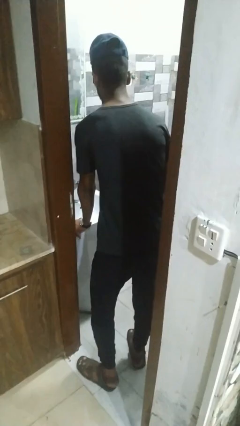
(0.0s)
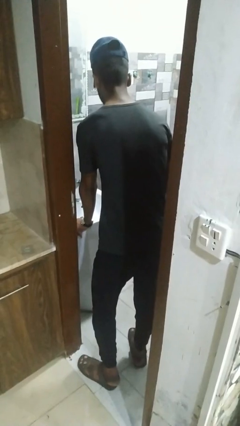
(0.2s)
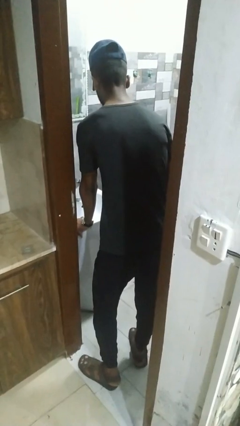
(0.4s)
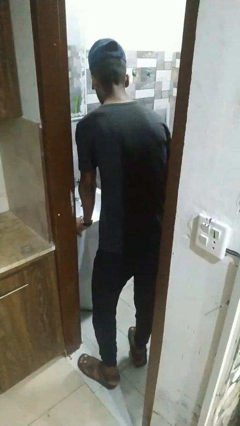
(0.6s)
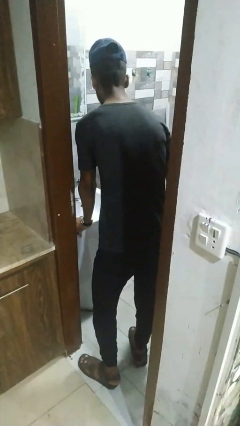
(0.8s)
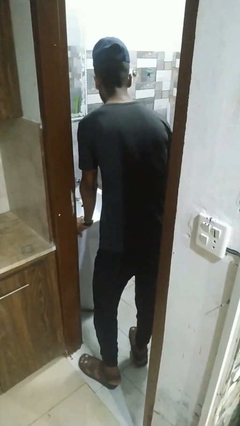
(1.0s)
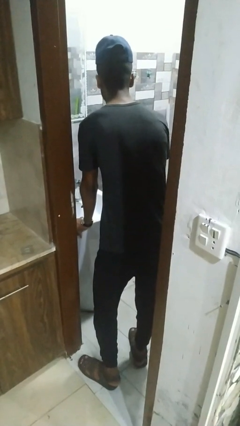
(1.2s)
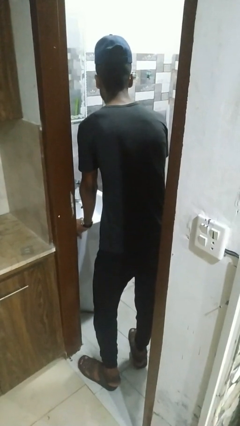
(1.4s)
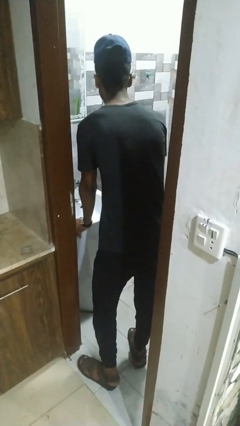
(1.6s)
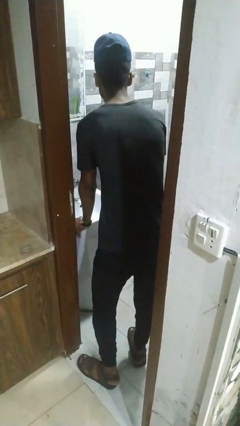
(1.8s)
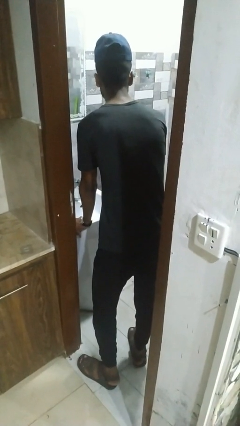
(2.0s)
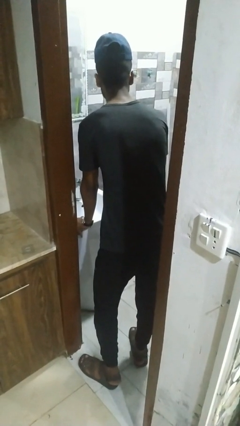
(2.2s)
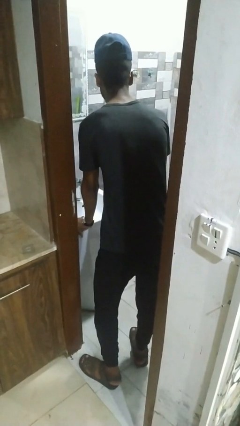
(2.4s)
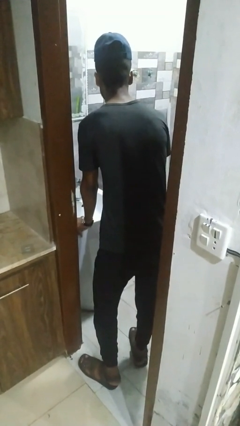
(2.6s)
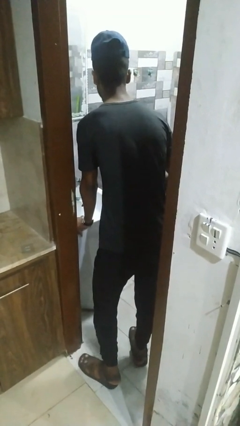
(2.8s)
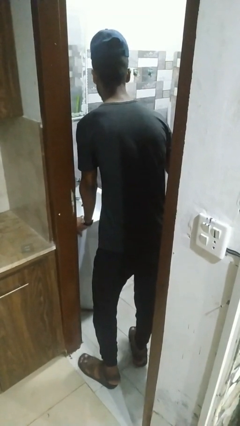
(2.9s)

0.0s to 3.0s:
person flosses

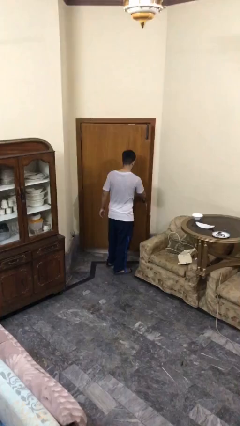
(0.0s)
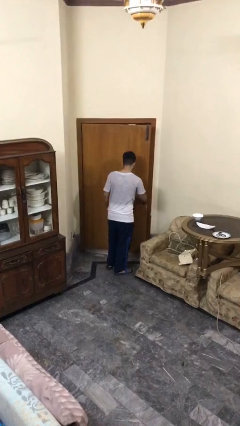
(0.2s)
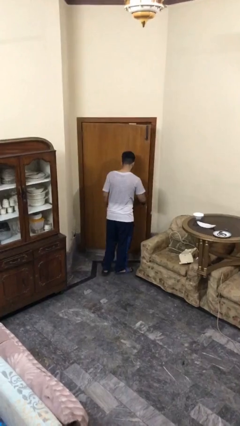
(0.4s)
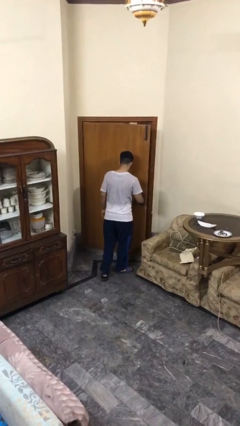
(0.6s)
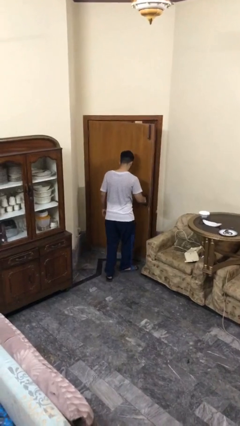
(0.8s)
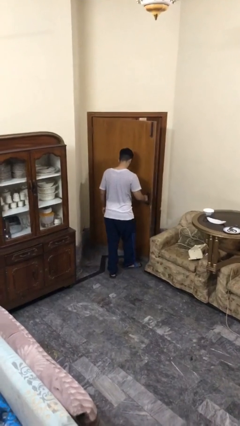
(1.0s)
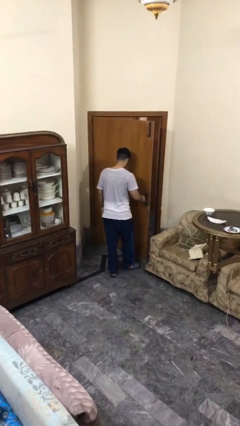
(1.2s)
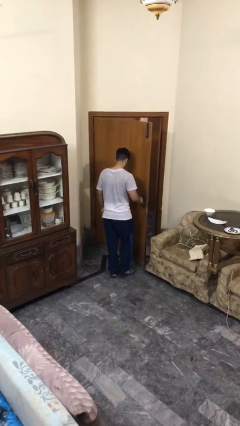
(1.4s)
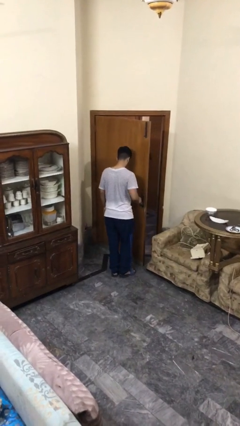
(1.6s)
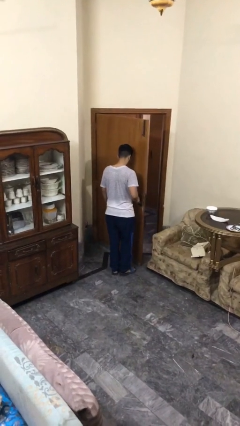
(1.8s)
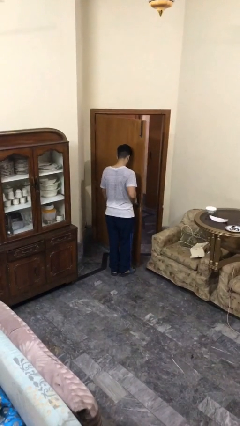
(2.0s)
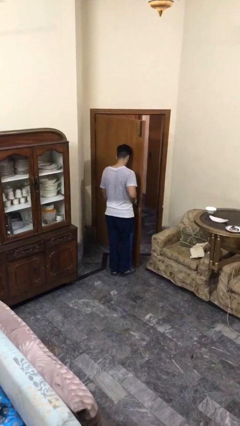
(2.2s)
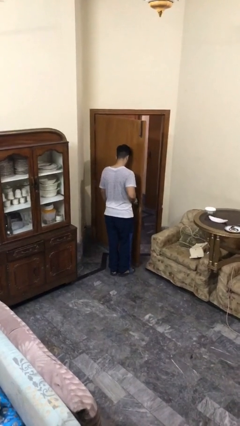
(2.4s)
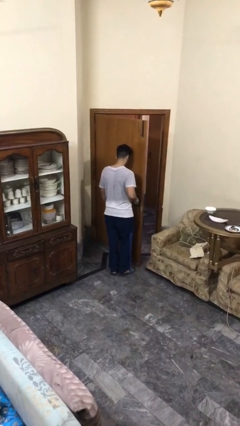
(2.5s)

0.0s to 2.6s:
person opens facility door

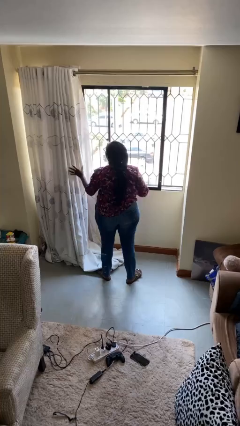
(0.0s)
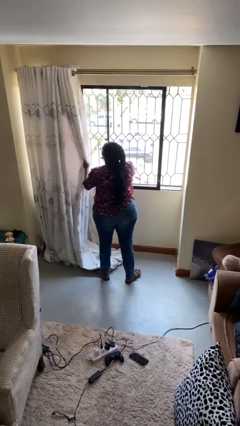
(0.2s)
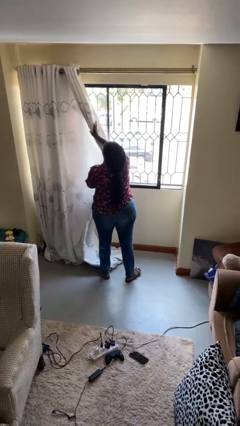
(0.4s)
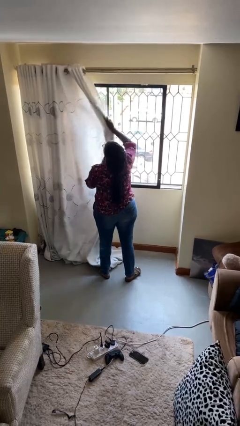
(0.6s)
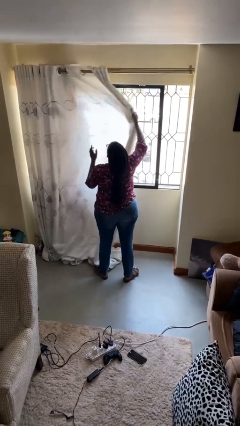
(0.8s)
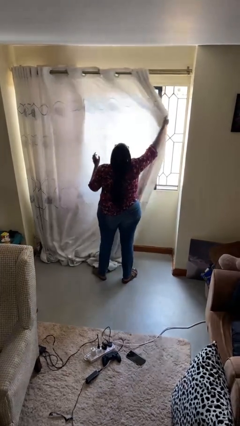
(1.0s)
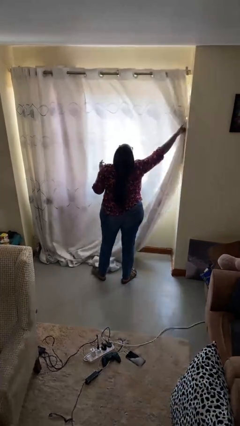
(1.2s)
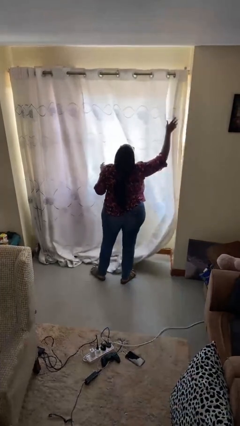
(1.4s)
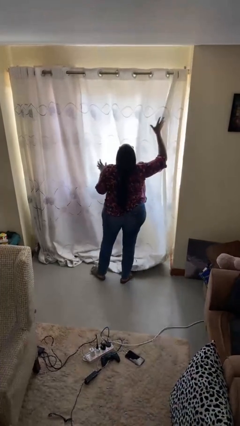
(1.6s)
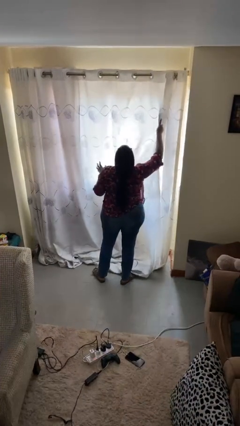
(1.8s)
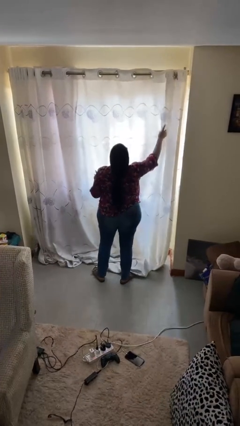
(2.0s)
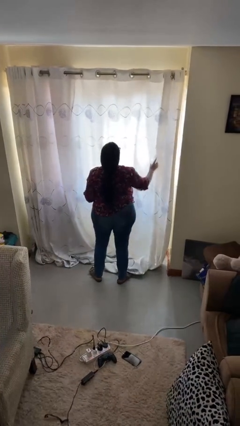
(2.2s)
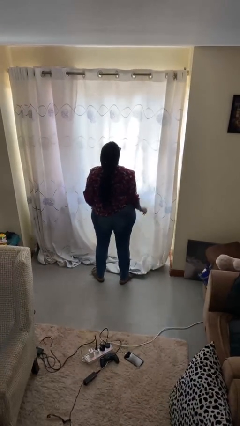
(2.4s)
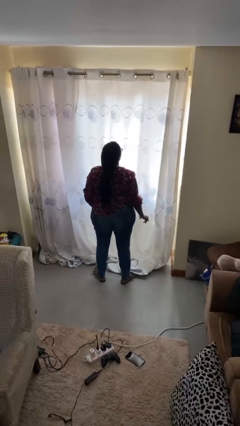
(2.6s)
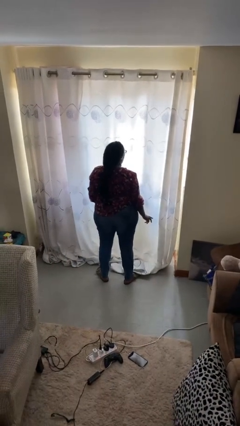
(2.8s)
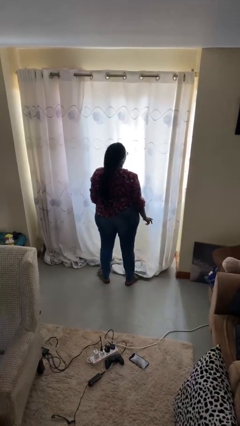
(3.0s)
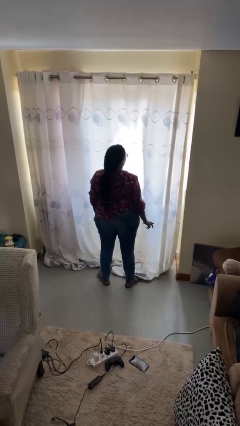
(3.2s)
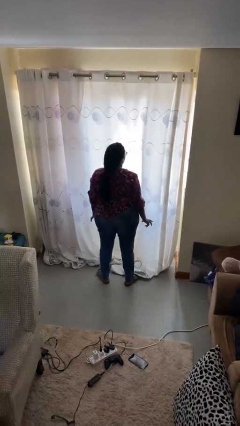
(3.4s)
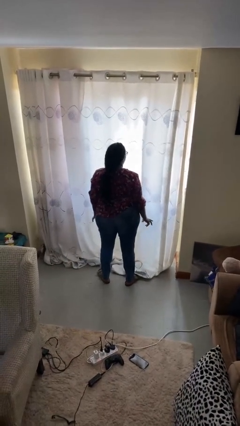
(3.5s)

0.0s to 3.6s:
person closes curtains

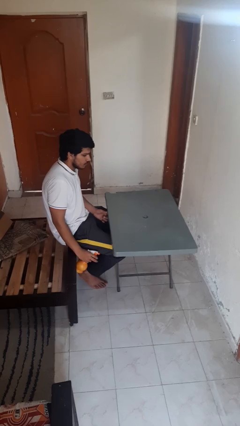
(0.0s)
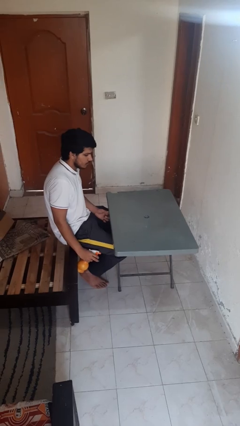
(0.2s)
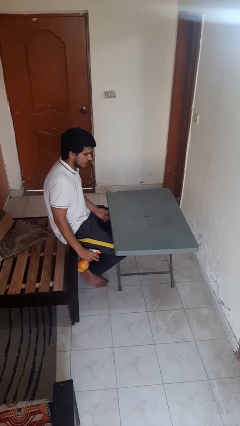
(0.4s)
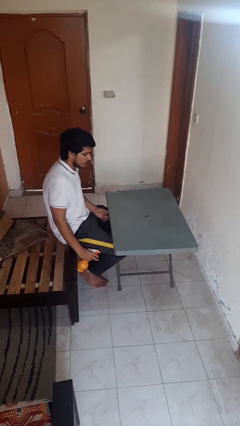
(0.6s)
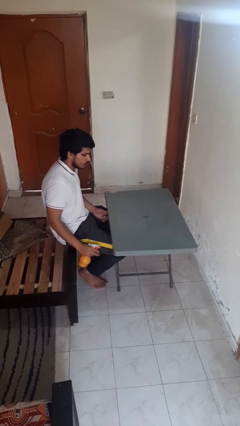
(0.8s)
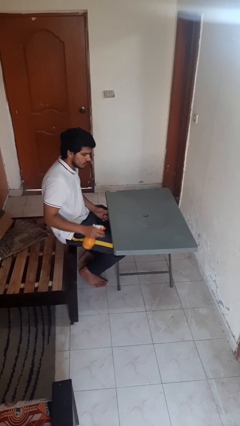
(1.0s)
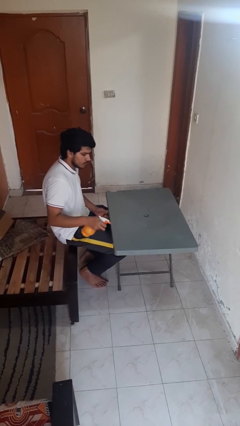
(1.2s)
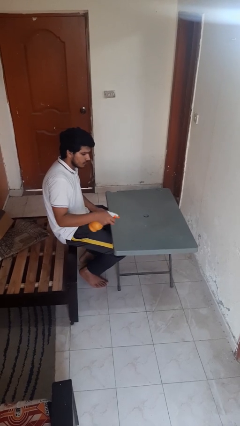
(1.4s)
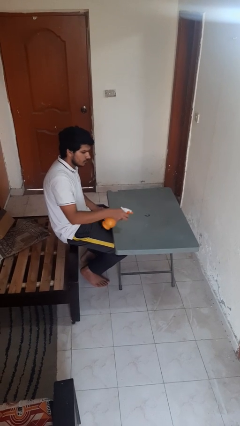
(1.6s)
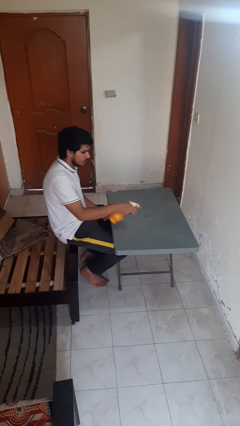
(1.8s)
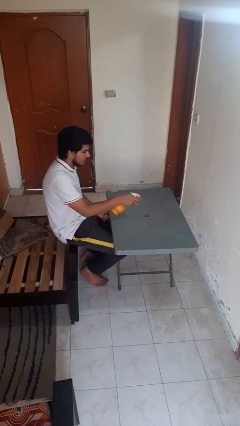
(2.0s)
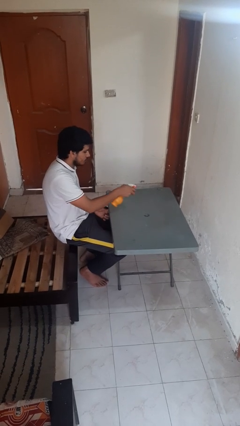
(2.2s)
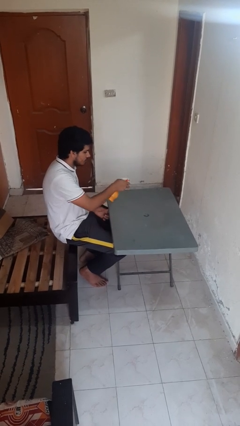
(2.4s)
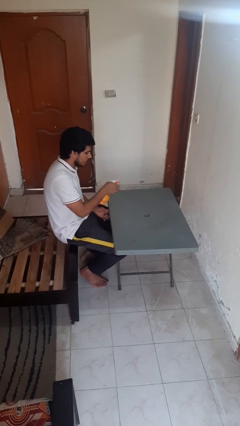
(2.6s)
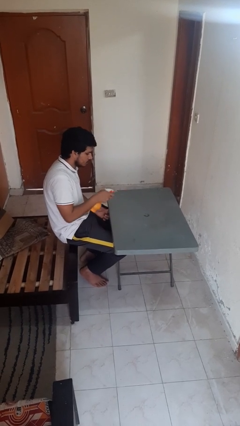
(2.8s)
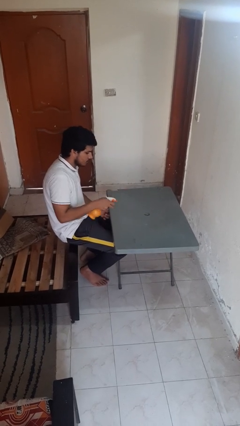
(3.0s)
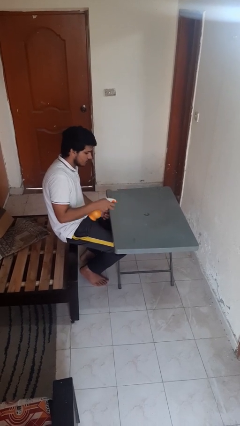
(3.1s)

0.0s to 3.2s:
person sprays from bottle

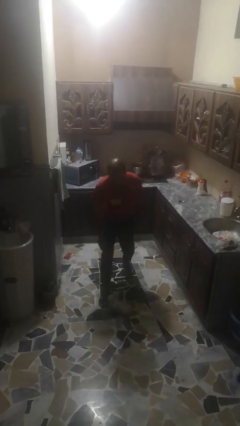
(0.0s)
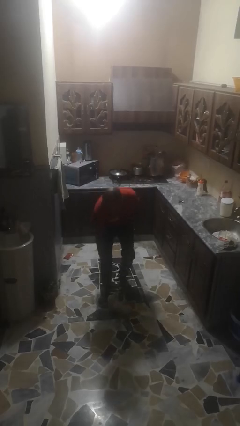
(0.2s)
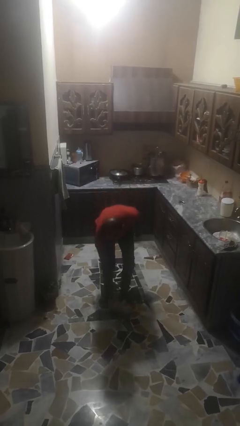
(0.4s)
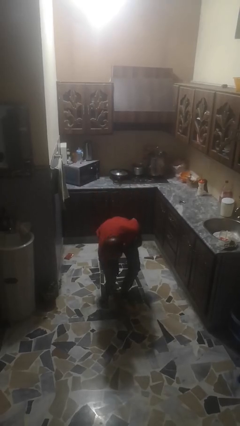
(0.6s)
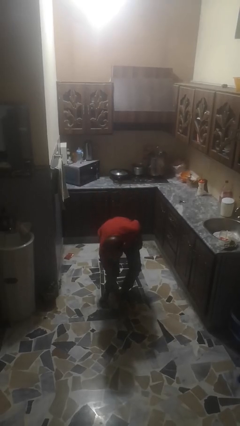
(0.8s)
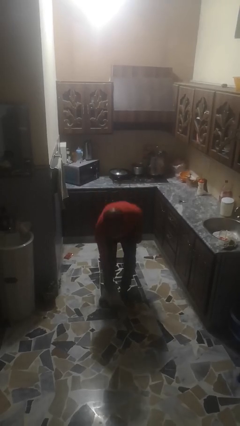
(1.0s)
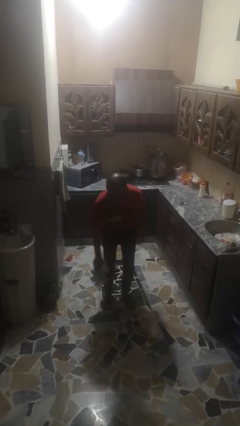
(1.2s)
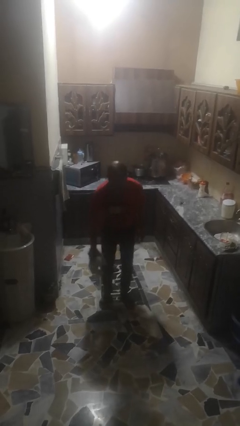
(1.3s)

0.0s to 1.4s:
person picks up object from floor

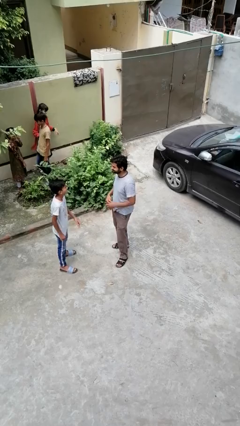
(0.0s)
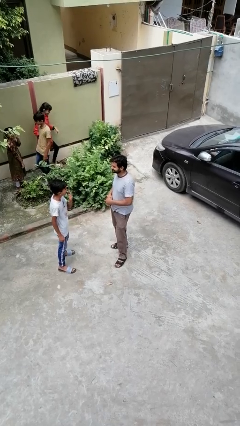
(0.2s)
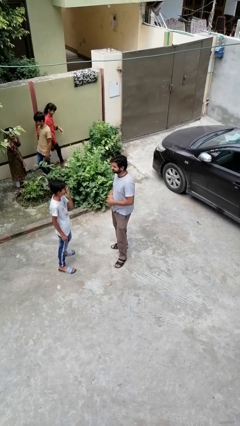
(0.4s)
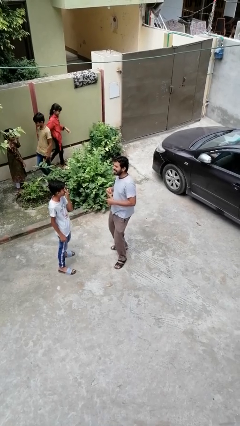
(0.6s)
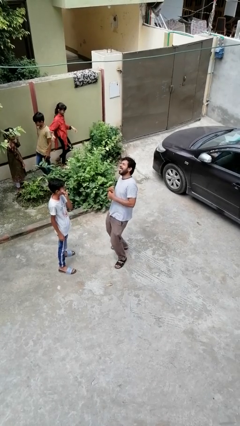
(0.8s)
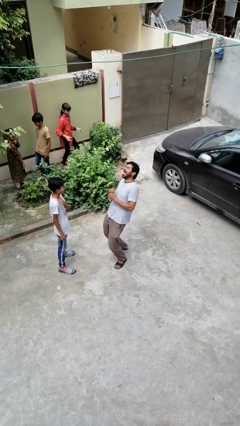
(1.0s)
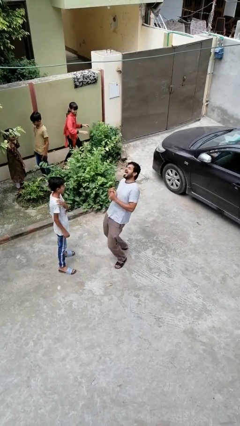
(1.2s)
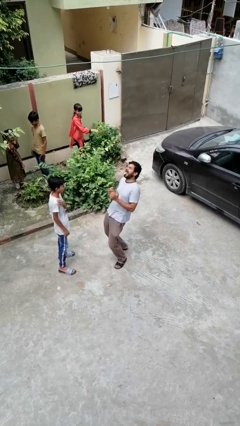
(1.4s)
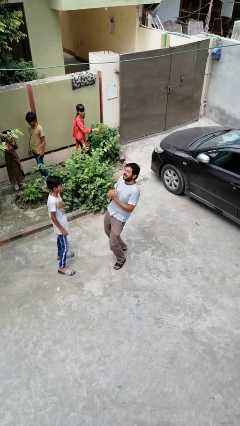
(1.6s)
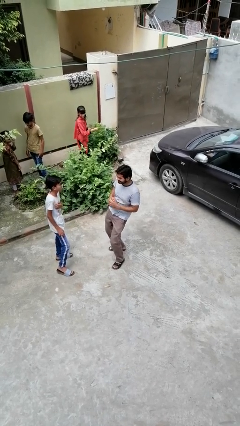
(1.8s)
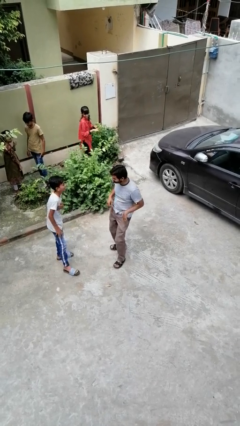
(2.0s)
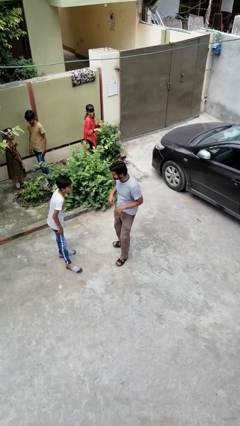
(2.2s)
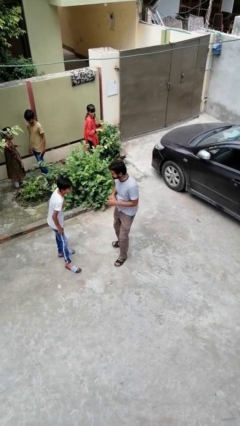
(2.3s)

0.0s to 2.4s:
person laughs with person

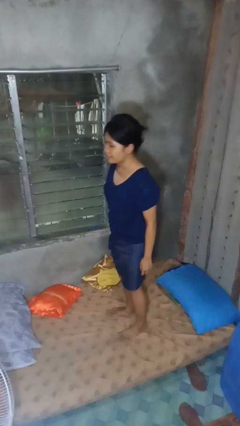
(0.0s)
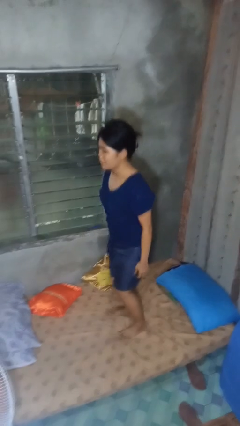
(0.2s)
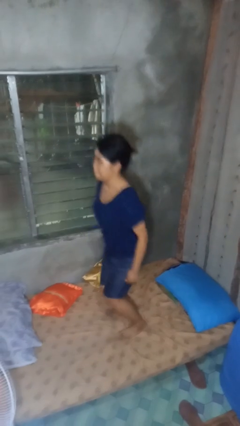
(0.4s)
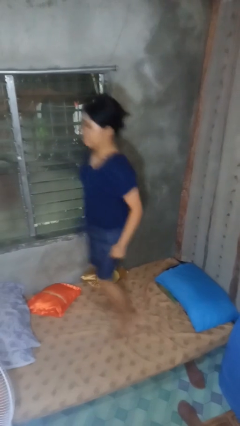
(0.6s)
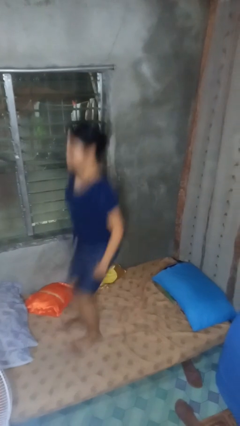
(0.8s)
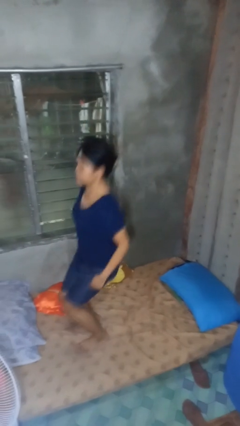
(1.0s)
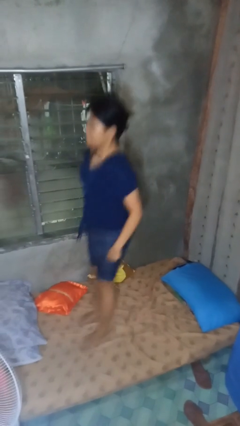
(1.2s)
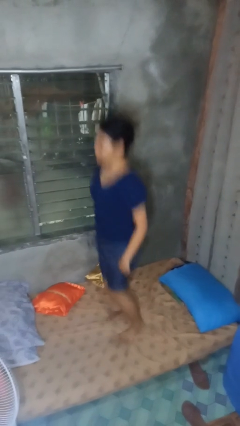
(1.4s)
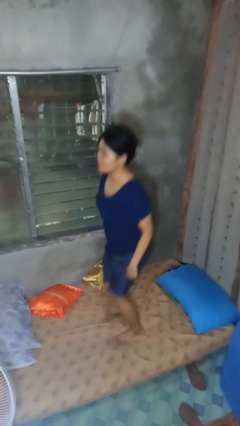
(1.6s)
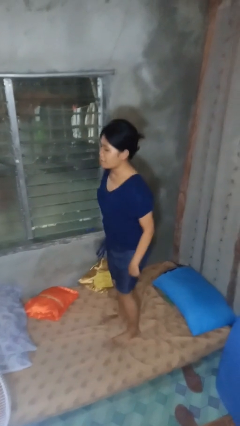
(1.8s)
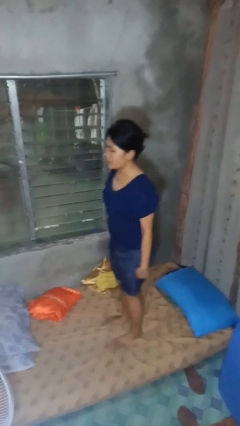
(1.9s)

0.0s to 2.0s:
person jumps on bed
